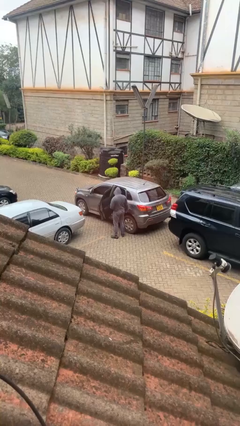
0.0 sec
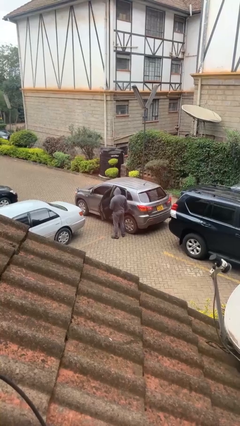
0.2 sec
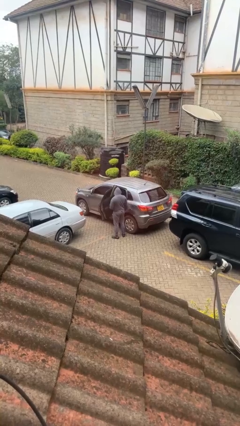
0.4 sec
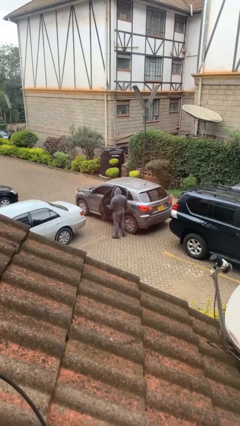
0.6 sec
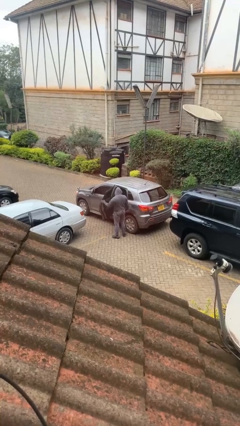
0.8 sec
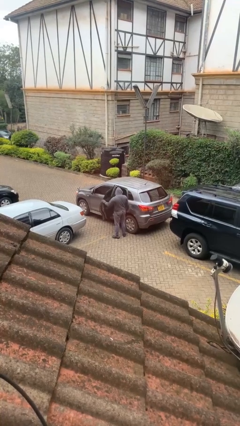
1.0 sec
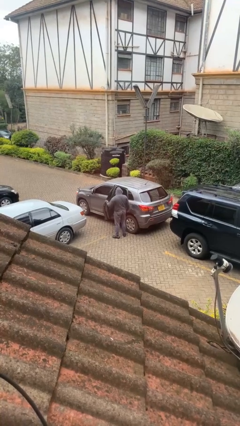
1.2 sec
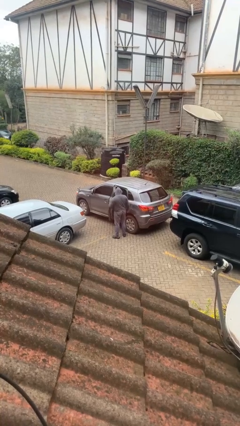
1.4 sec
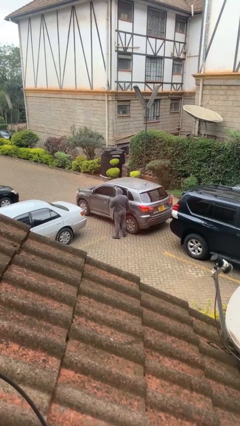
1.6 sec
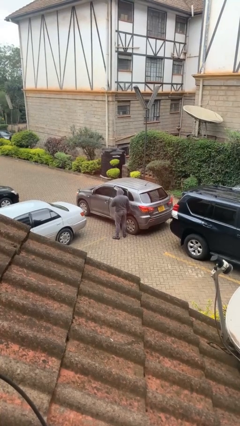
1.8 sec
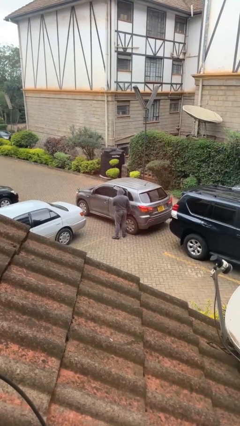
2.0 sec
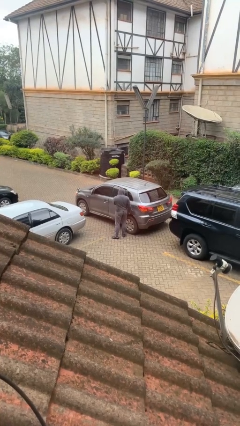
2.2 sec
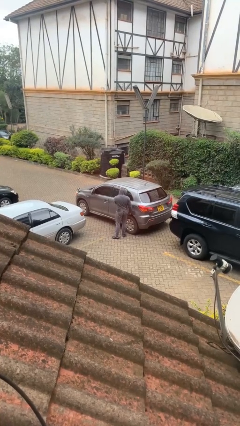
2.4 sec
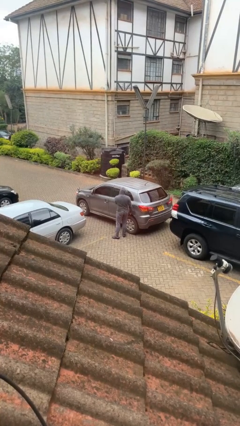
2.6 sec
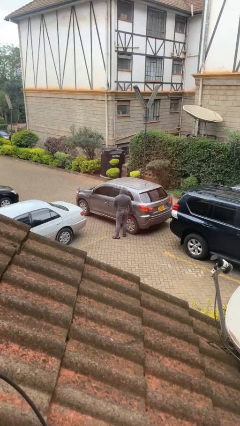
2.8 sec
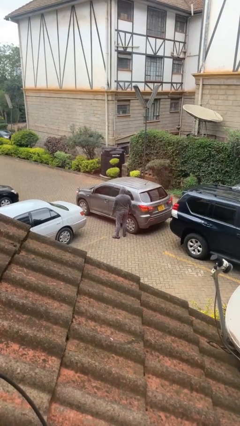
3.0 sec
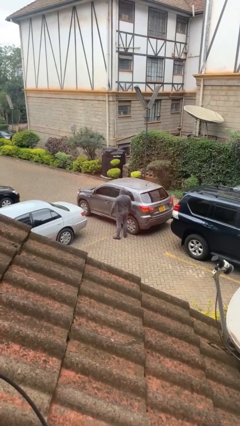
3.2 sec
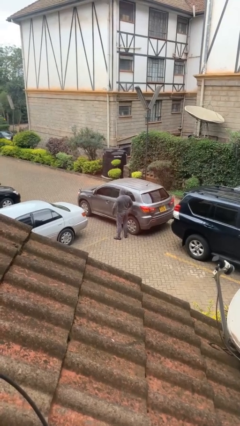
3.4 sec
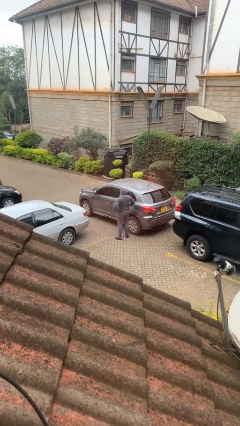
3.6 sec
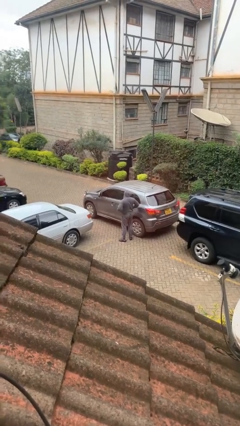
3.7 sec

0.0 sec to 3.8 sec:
person closes car door

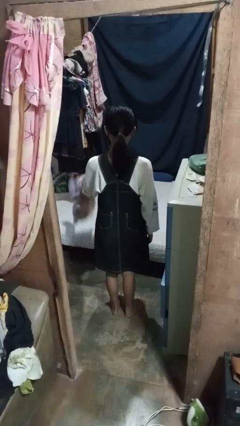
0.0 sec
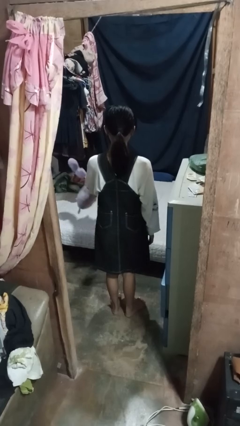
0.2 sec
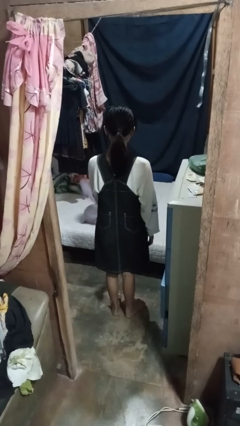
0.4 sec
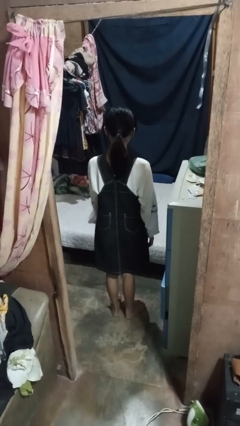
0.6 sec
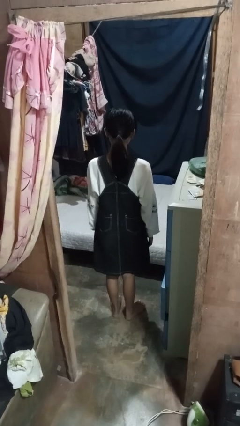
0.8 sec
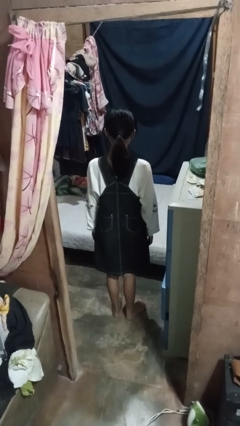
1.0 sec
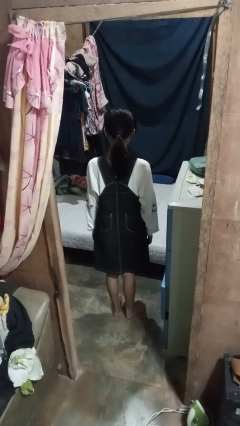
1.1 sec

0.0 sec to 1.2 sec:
person throws object on bed

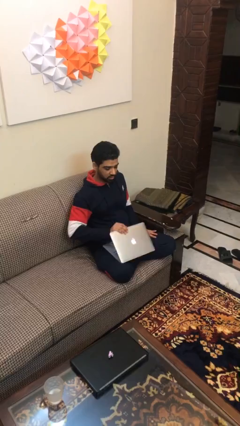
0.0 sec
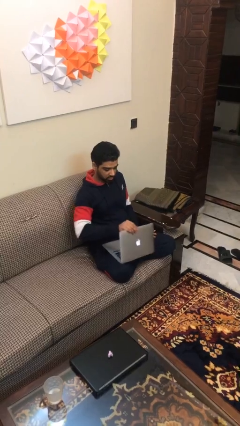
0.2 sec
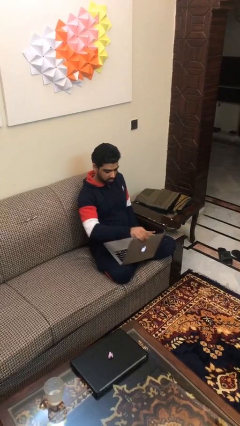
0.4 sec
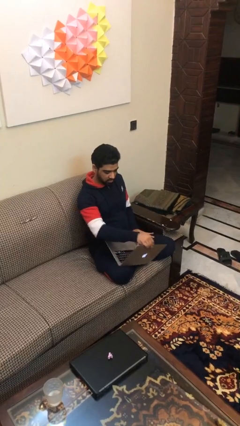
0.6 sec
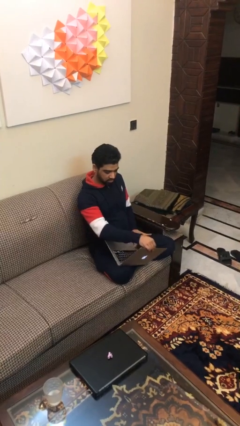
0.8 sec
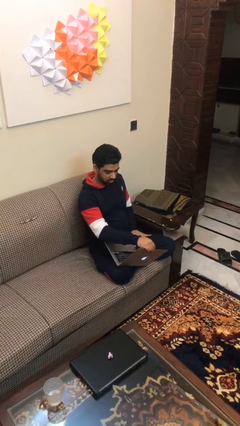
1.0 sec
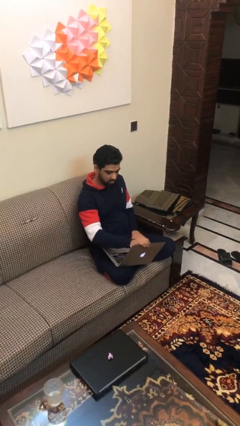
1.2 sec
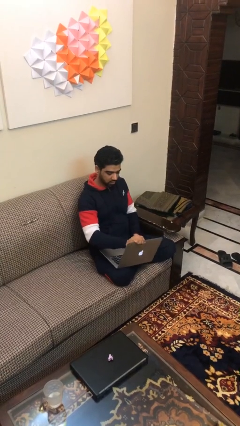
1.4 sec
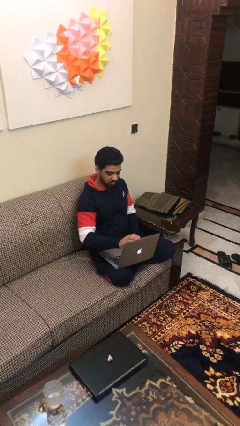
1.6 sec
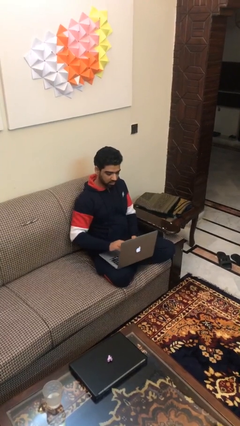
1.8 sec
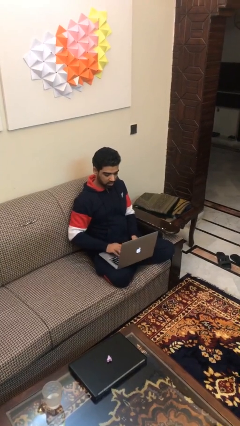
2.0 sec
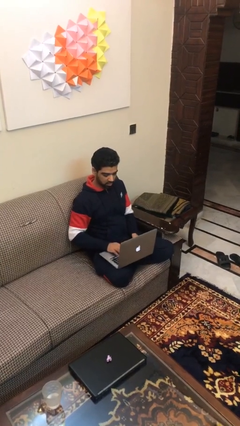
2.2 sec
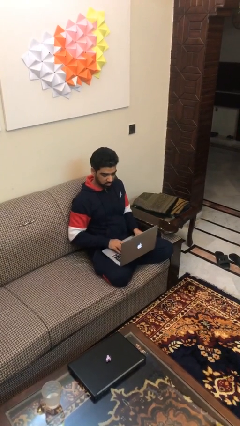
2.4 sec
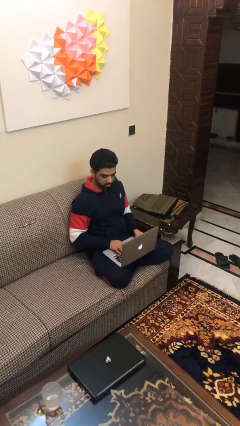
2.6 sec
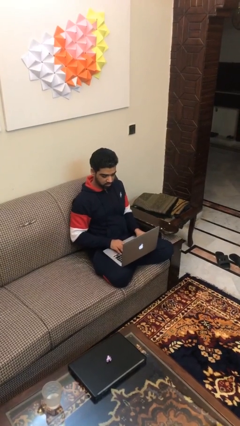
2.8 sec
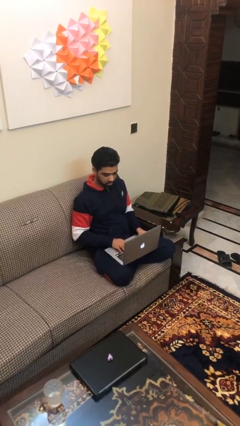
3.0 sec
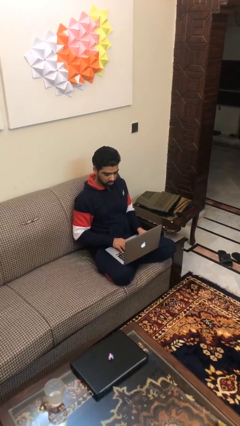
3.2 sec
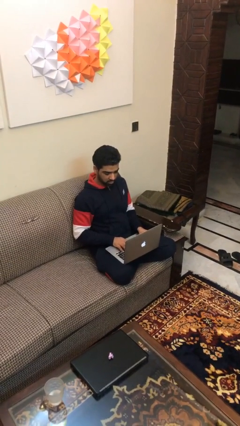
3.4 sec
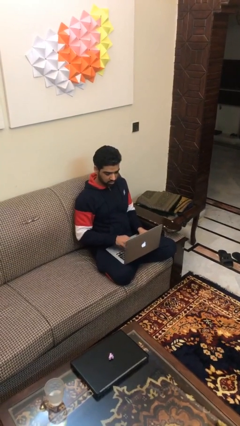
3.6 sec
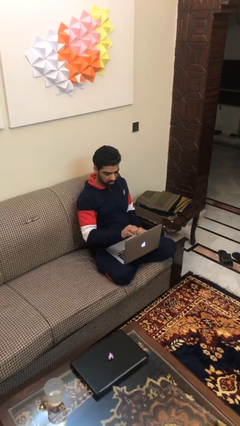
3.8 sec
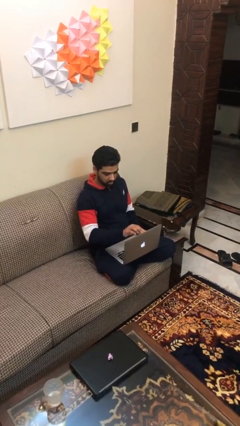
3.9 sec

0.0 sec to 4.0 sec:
person interacts with laptop

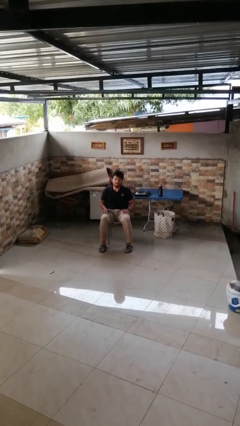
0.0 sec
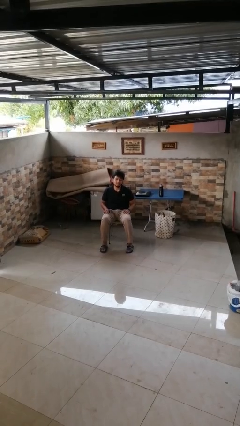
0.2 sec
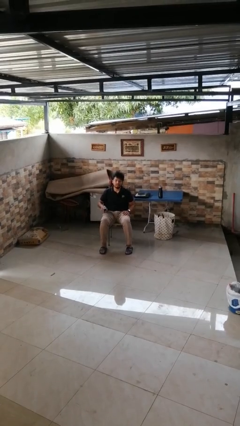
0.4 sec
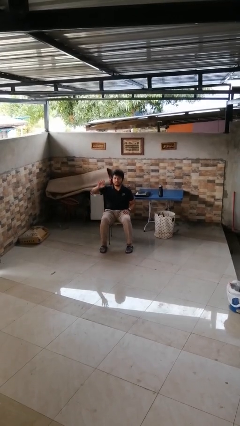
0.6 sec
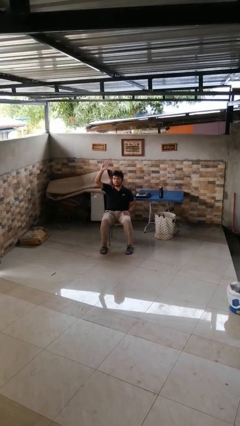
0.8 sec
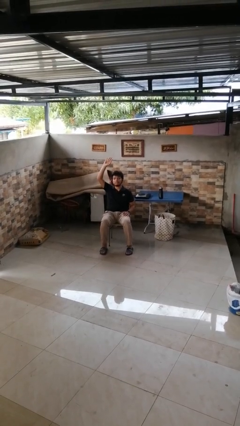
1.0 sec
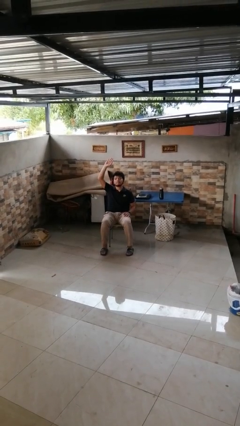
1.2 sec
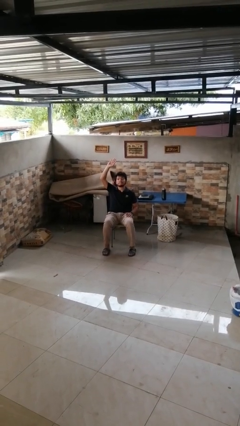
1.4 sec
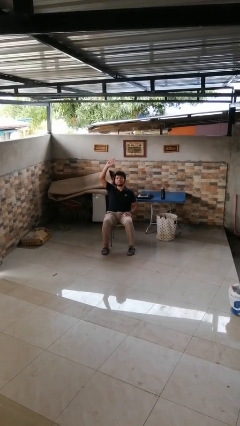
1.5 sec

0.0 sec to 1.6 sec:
person gestures raise hand

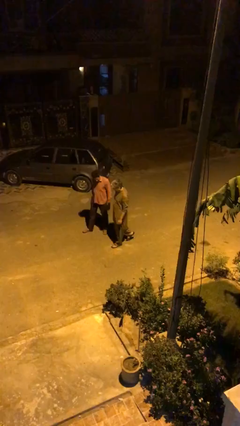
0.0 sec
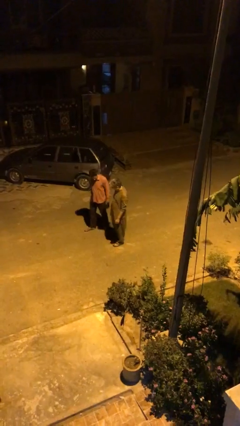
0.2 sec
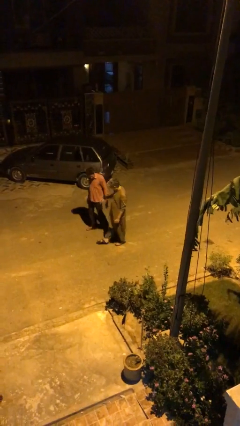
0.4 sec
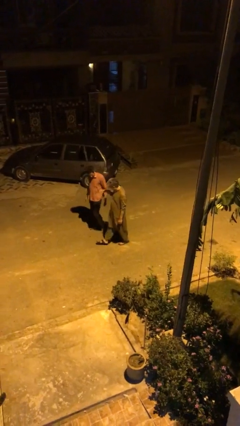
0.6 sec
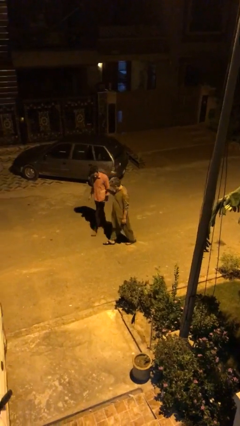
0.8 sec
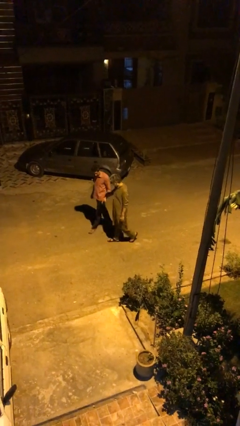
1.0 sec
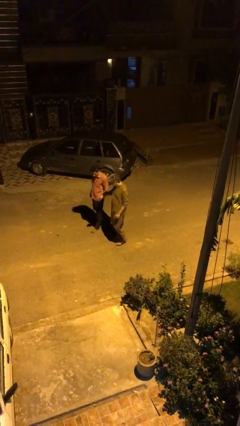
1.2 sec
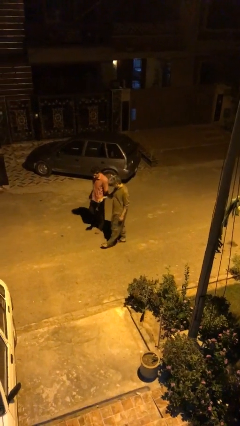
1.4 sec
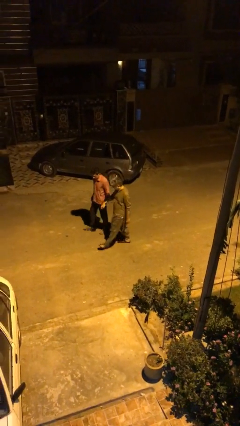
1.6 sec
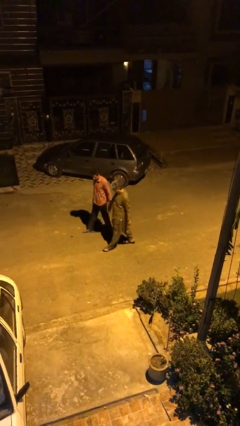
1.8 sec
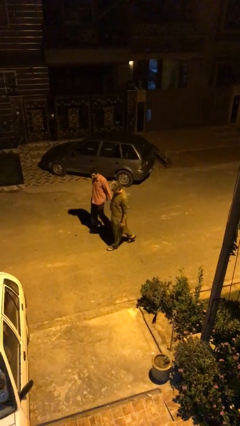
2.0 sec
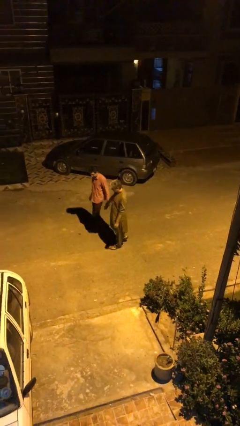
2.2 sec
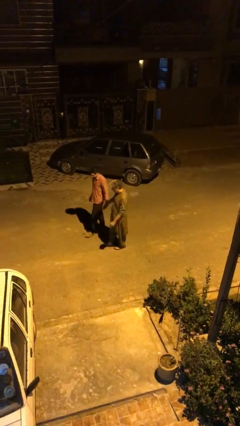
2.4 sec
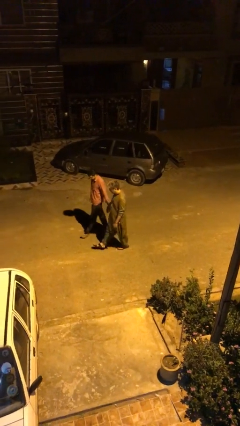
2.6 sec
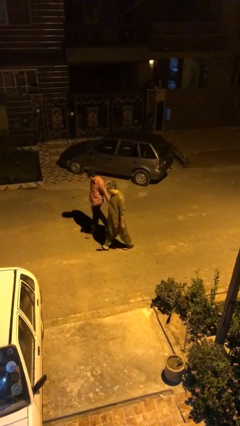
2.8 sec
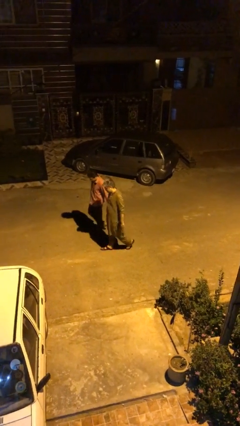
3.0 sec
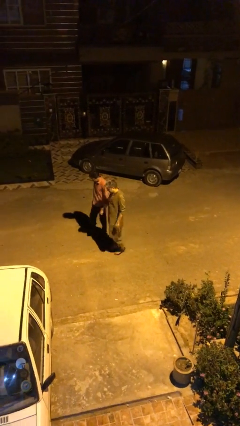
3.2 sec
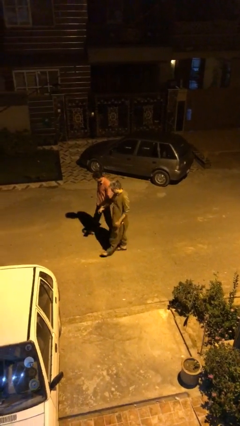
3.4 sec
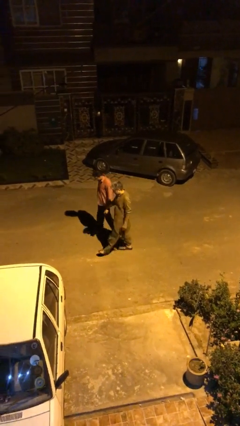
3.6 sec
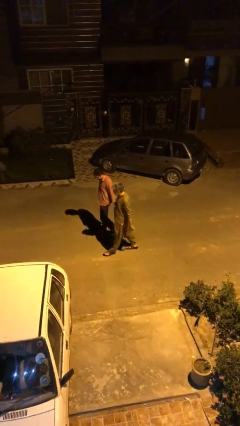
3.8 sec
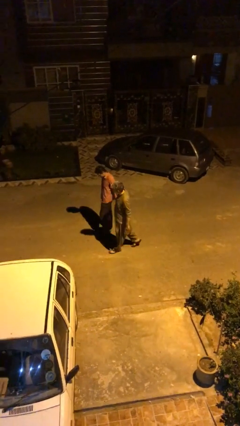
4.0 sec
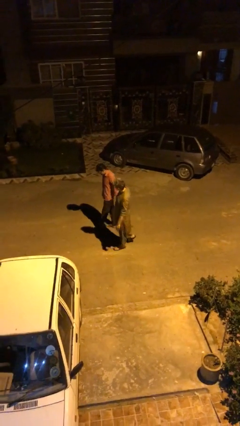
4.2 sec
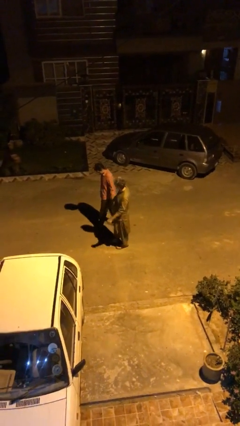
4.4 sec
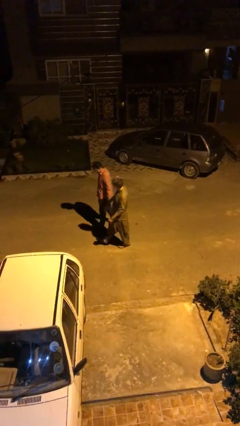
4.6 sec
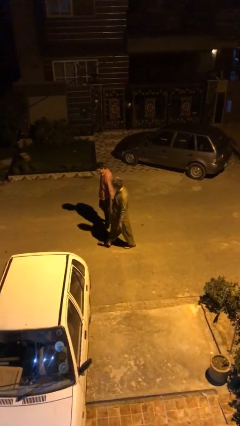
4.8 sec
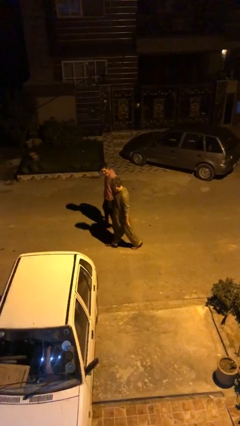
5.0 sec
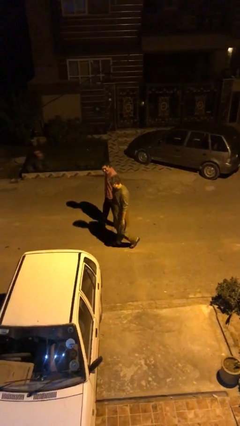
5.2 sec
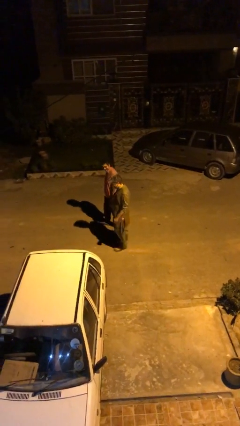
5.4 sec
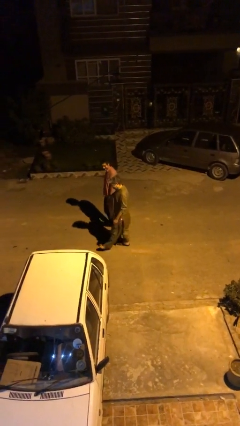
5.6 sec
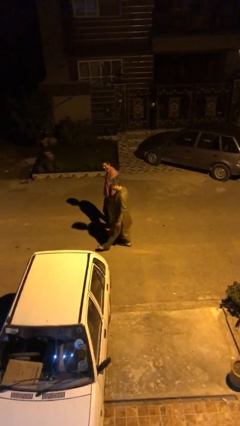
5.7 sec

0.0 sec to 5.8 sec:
person holds hand

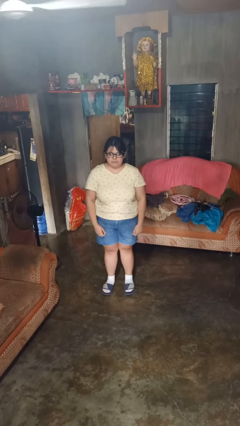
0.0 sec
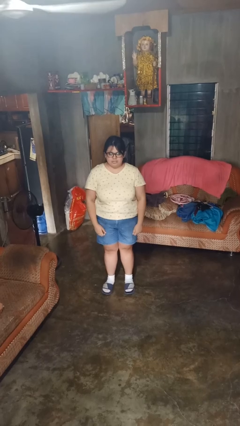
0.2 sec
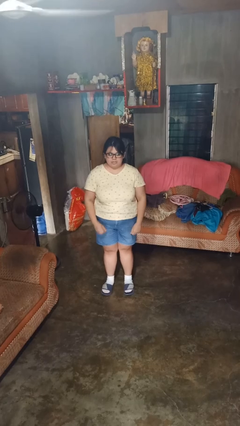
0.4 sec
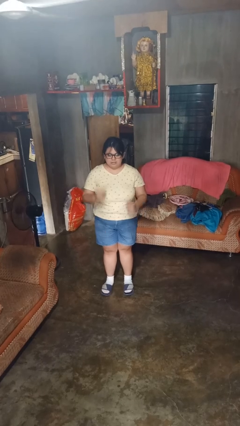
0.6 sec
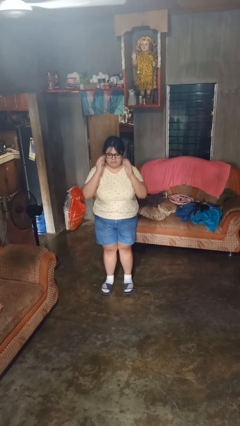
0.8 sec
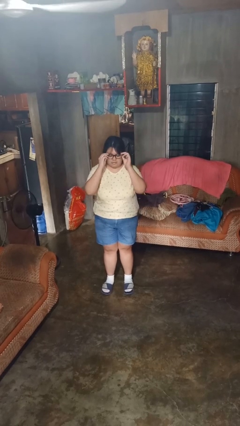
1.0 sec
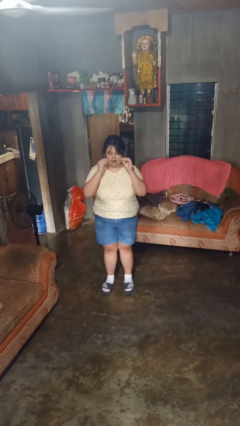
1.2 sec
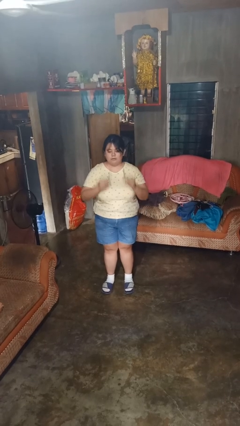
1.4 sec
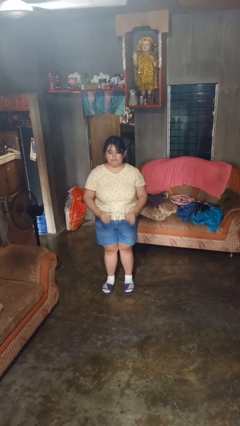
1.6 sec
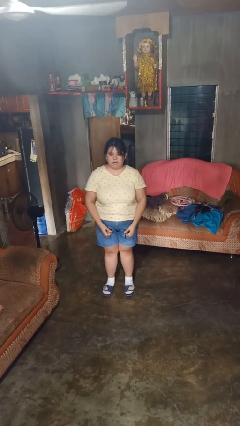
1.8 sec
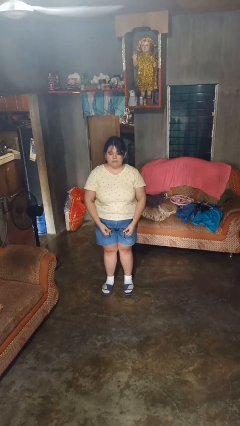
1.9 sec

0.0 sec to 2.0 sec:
person takes off glasses
